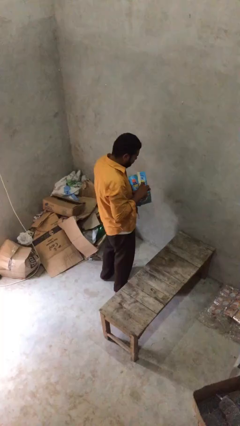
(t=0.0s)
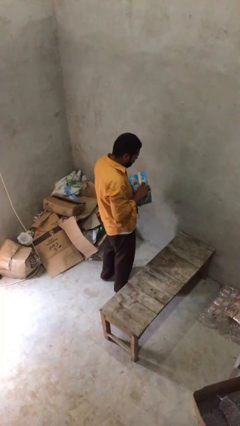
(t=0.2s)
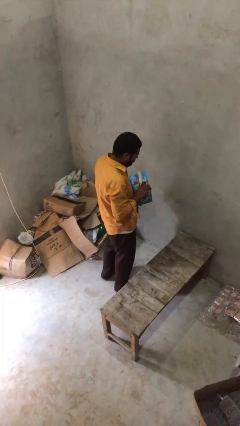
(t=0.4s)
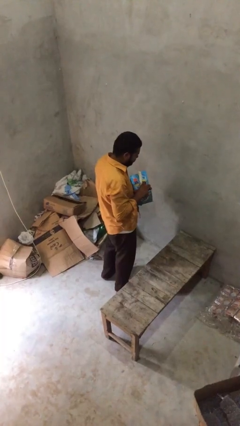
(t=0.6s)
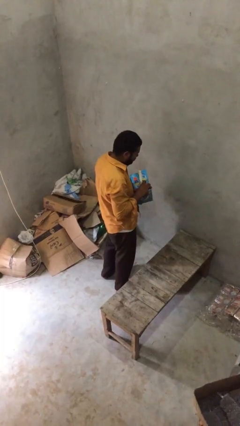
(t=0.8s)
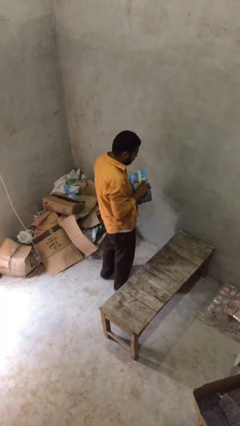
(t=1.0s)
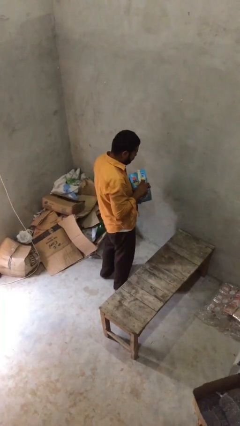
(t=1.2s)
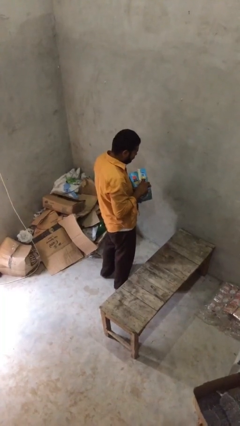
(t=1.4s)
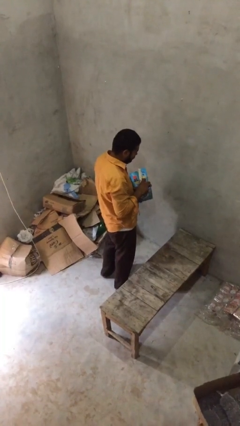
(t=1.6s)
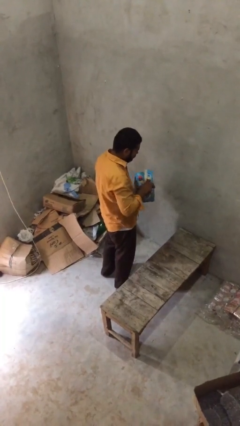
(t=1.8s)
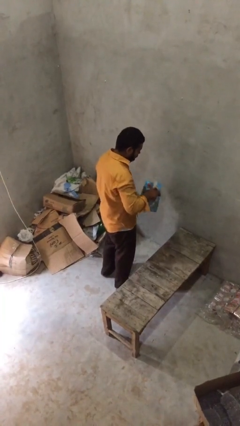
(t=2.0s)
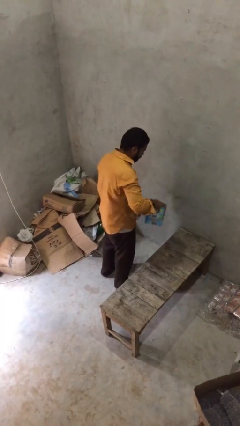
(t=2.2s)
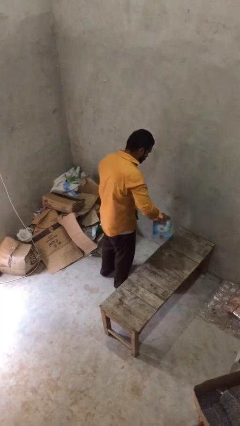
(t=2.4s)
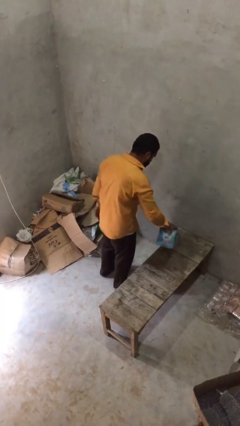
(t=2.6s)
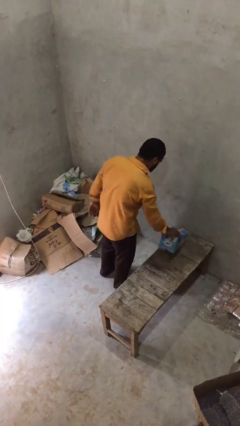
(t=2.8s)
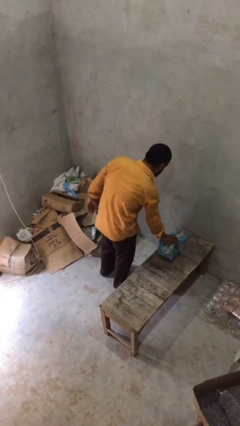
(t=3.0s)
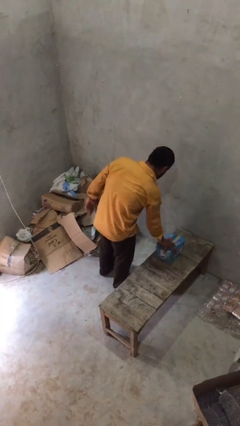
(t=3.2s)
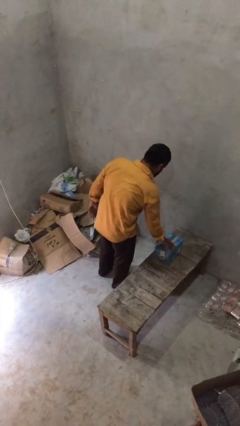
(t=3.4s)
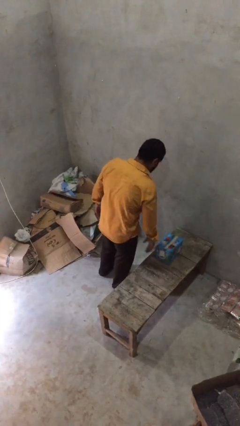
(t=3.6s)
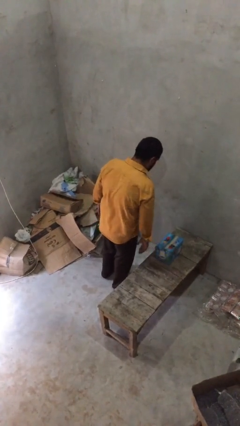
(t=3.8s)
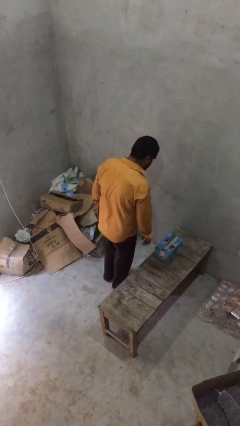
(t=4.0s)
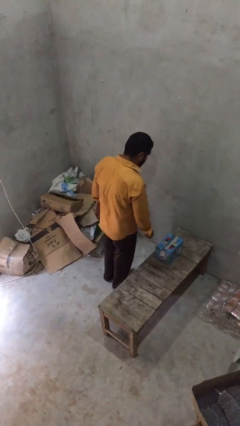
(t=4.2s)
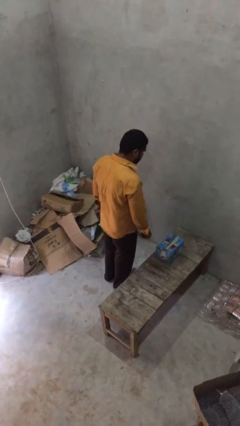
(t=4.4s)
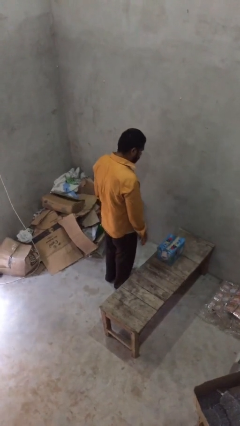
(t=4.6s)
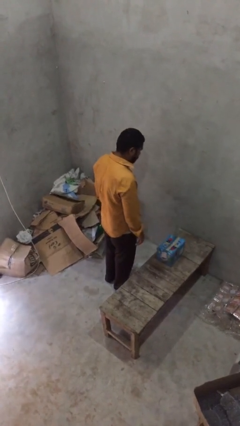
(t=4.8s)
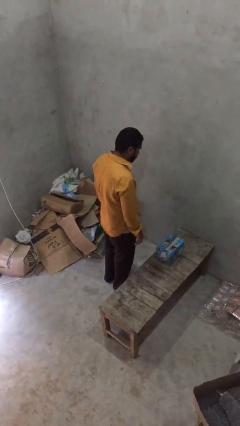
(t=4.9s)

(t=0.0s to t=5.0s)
person puts down object on table

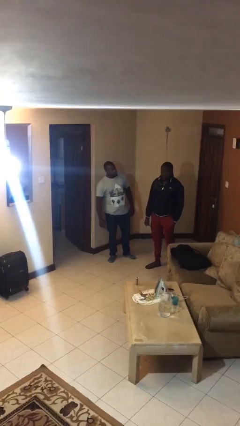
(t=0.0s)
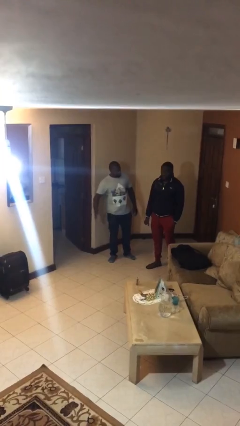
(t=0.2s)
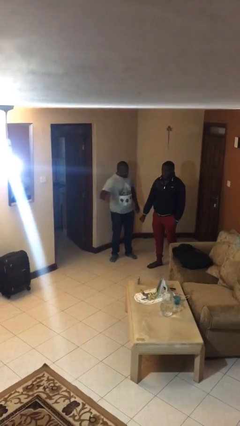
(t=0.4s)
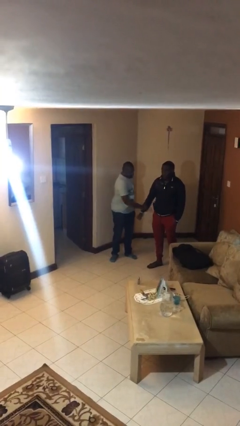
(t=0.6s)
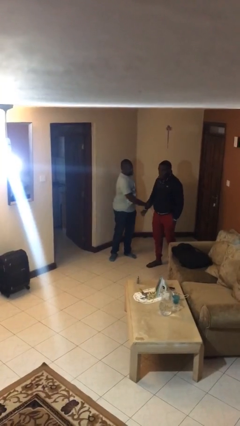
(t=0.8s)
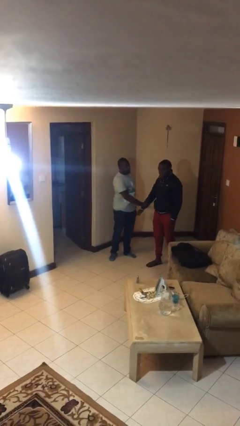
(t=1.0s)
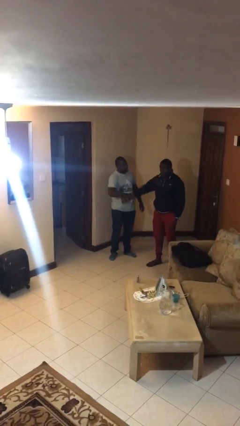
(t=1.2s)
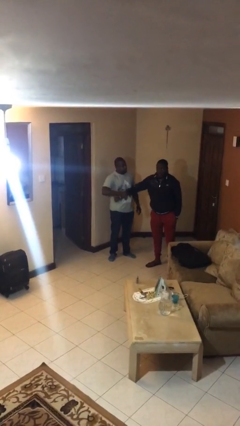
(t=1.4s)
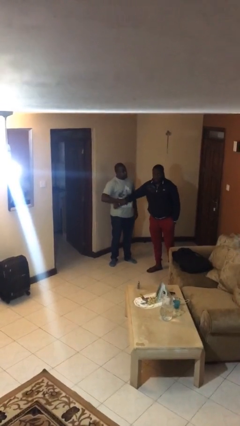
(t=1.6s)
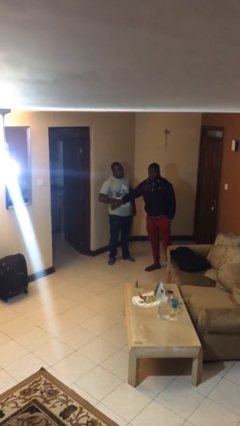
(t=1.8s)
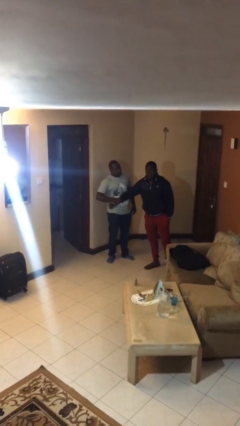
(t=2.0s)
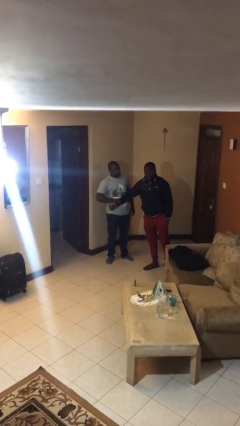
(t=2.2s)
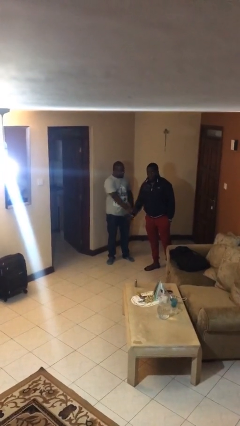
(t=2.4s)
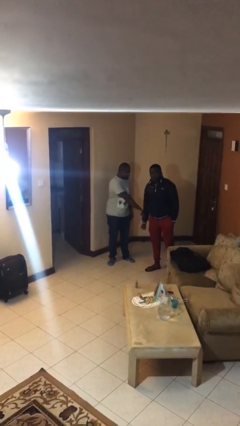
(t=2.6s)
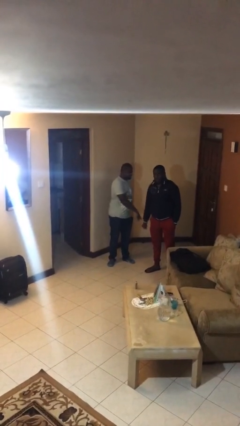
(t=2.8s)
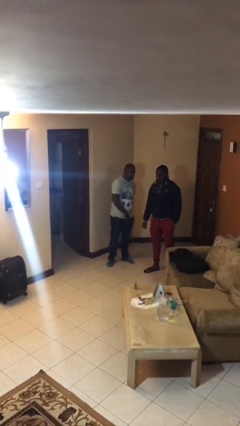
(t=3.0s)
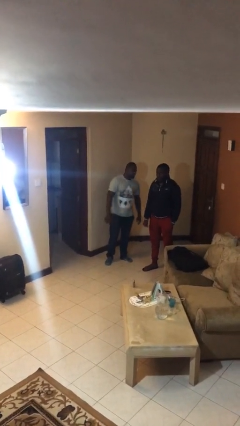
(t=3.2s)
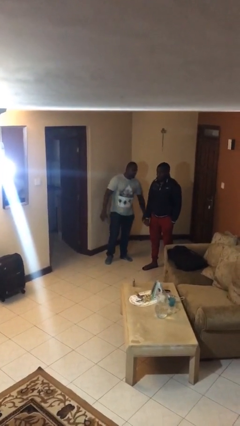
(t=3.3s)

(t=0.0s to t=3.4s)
person grabs person by forearm

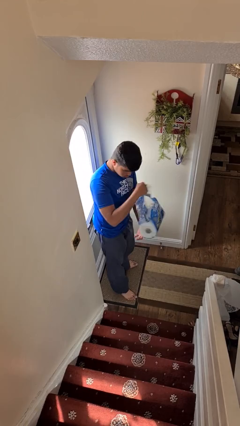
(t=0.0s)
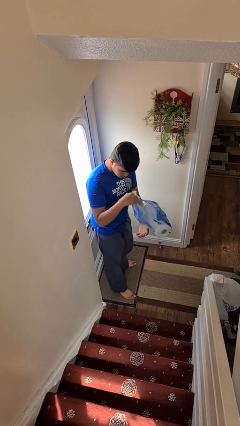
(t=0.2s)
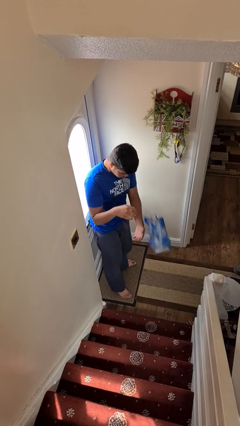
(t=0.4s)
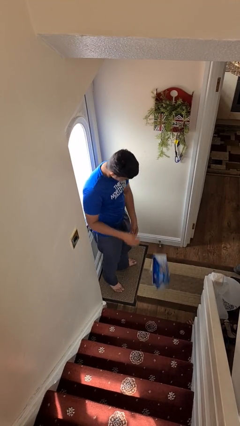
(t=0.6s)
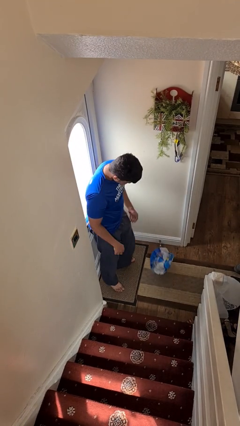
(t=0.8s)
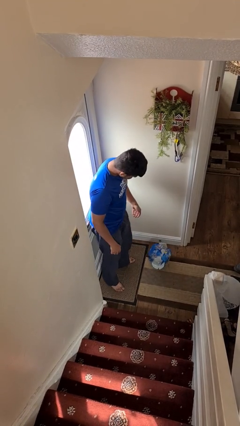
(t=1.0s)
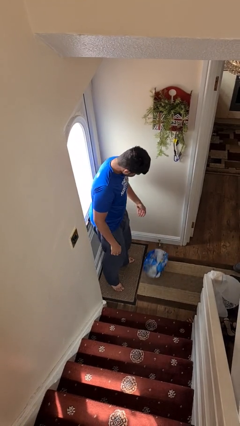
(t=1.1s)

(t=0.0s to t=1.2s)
person drops object

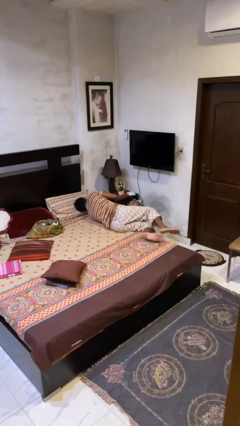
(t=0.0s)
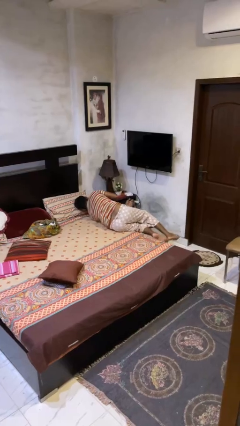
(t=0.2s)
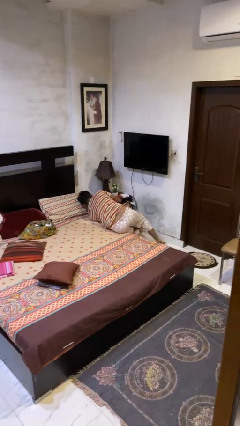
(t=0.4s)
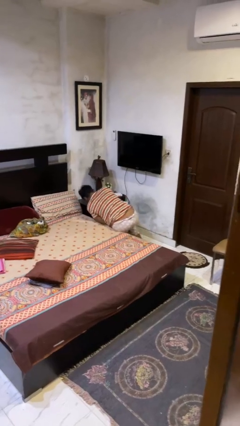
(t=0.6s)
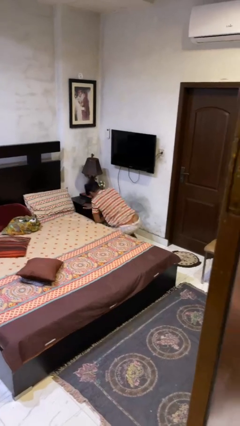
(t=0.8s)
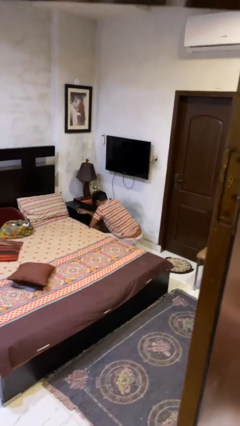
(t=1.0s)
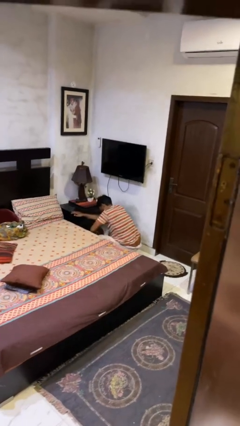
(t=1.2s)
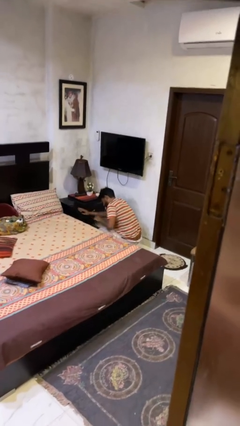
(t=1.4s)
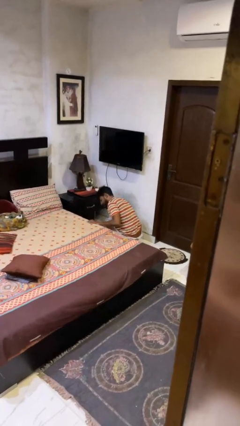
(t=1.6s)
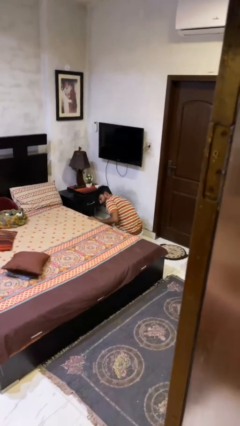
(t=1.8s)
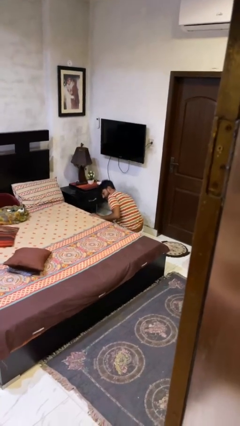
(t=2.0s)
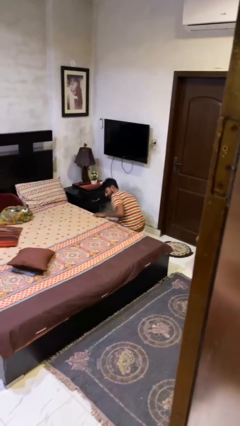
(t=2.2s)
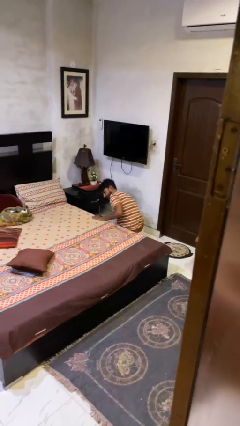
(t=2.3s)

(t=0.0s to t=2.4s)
person falls from bed

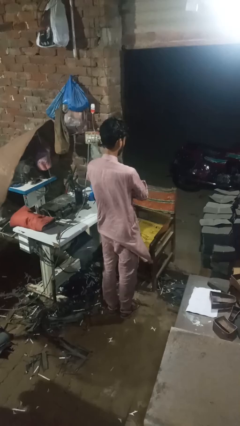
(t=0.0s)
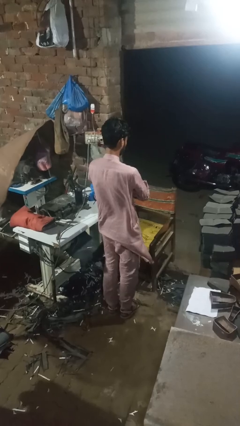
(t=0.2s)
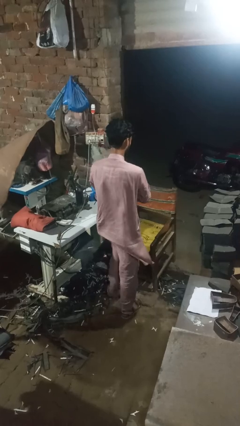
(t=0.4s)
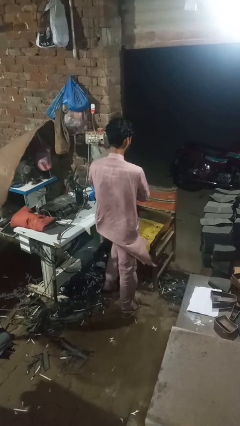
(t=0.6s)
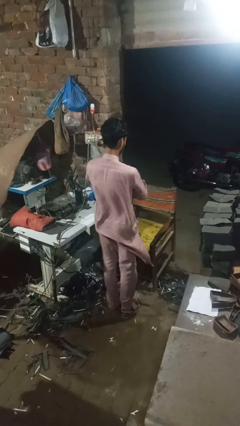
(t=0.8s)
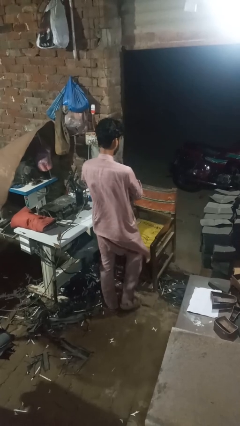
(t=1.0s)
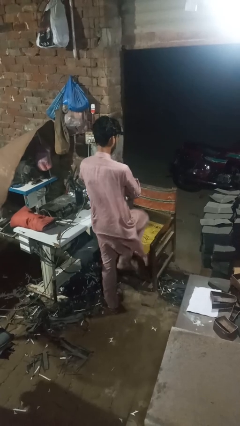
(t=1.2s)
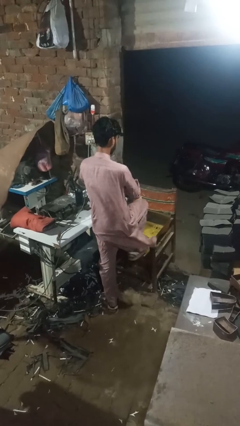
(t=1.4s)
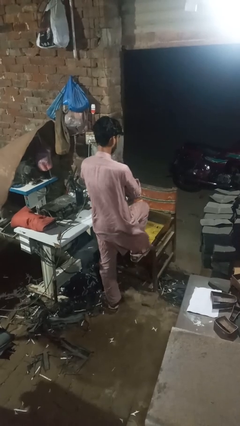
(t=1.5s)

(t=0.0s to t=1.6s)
person stubs toe

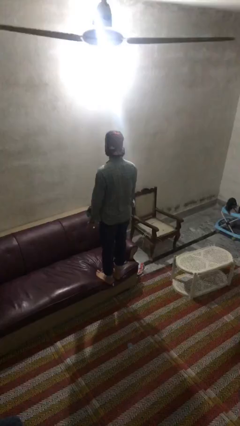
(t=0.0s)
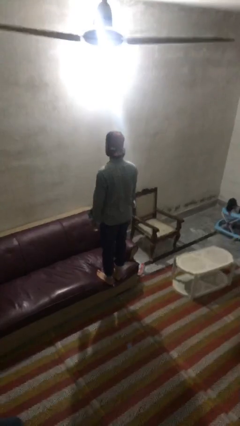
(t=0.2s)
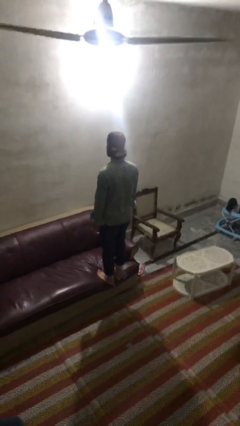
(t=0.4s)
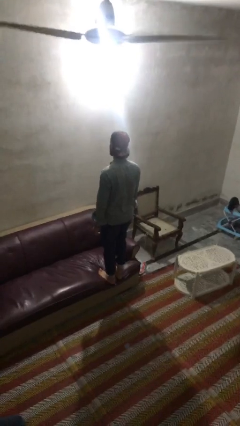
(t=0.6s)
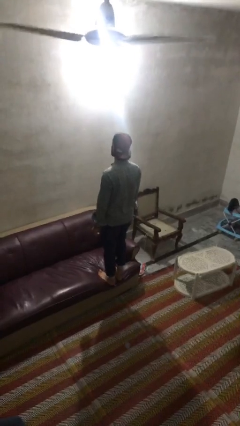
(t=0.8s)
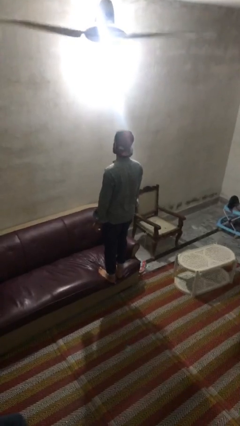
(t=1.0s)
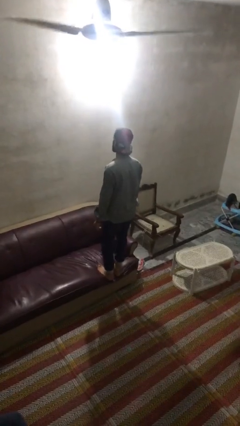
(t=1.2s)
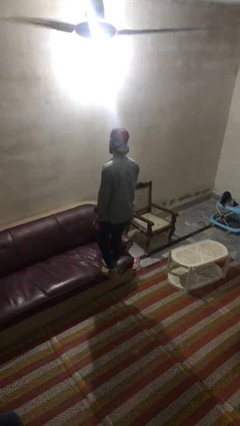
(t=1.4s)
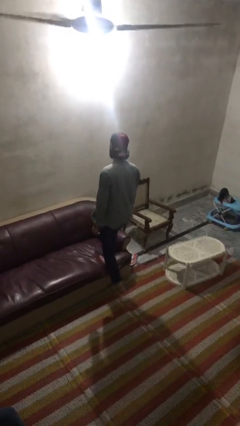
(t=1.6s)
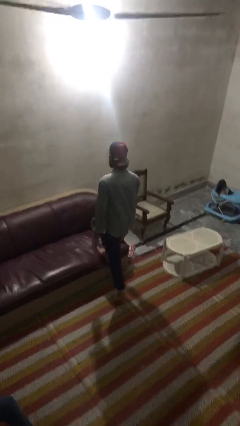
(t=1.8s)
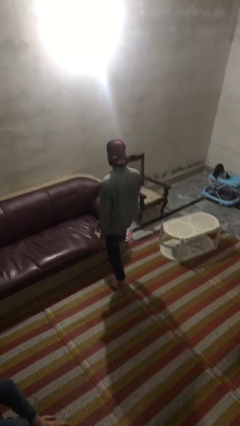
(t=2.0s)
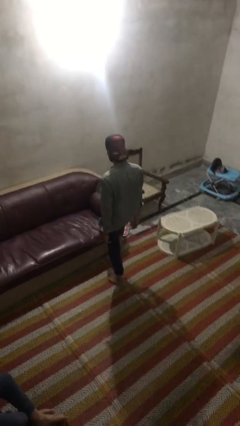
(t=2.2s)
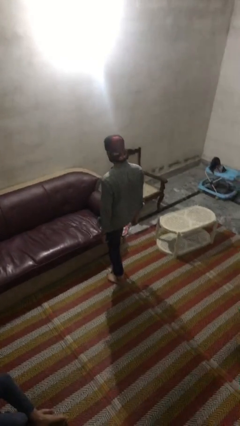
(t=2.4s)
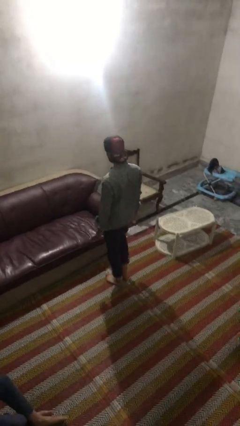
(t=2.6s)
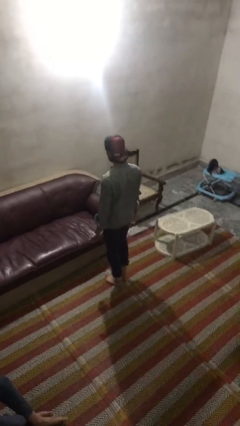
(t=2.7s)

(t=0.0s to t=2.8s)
person climbs off couch

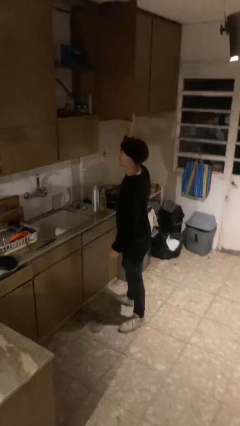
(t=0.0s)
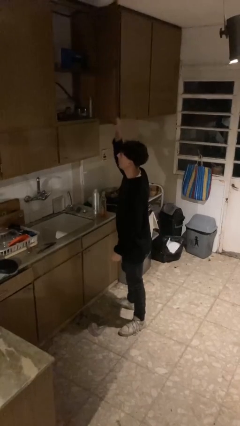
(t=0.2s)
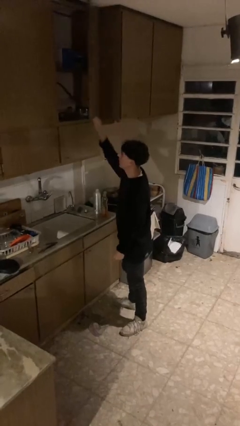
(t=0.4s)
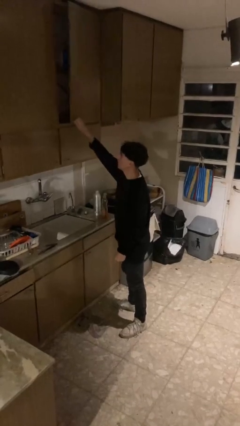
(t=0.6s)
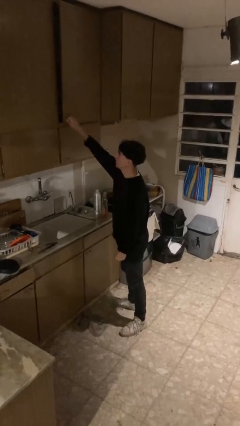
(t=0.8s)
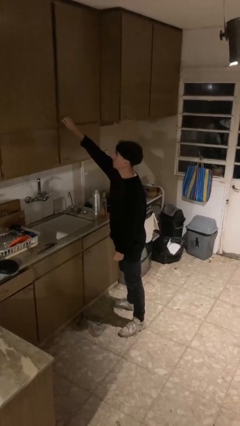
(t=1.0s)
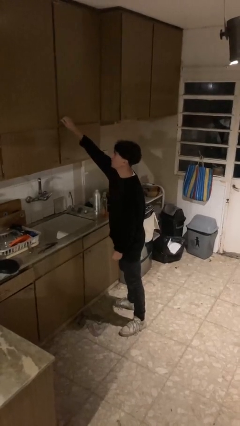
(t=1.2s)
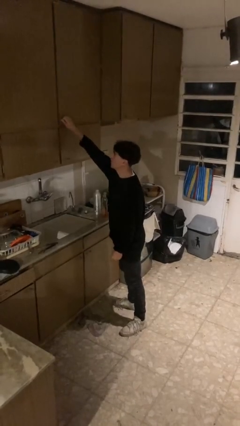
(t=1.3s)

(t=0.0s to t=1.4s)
person closes cabinet
